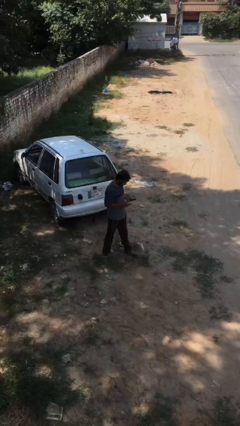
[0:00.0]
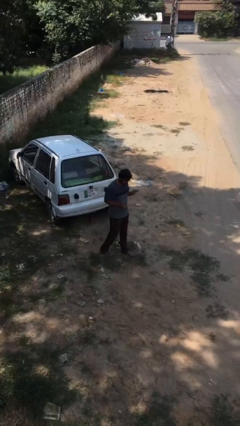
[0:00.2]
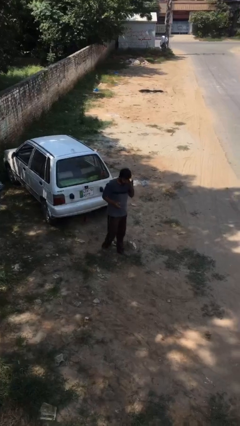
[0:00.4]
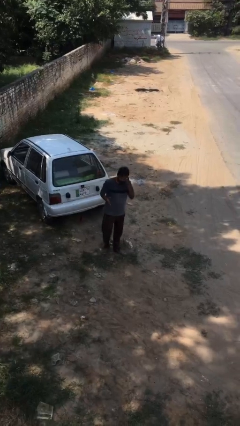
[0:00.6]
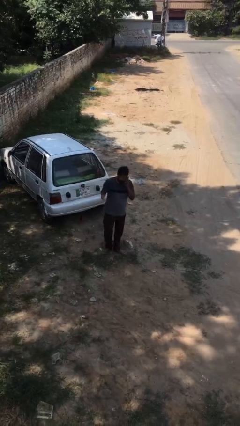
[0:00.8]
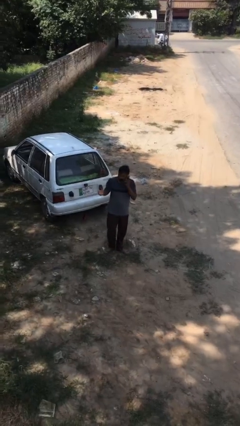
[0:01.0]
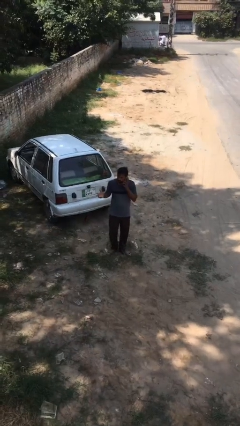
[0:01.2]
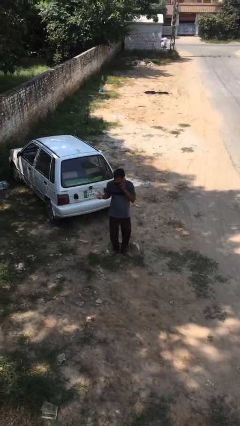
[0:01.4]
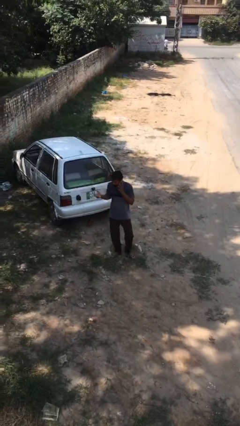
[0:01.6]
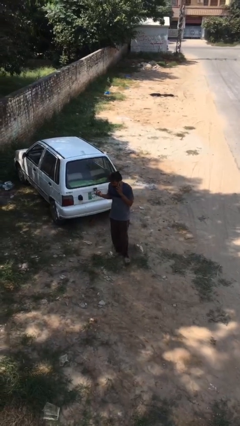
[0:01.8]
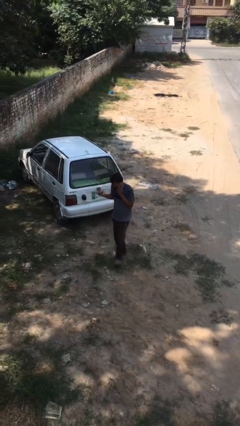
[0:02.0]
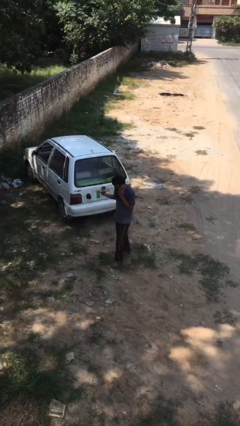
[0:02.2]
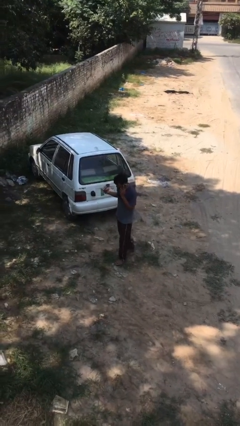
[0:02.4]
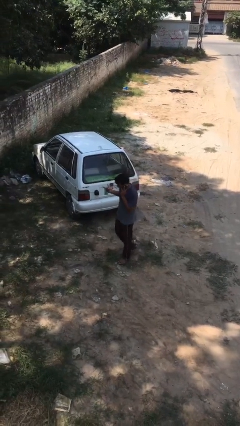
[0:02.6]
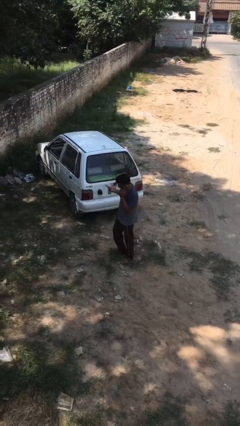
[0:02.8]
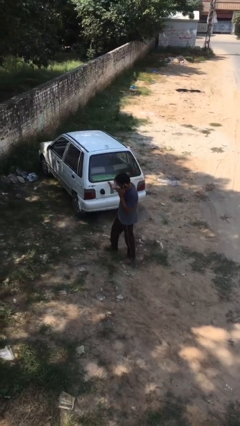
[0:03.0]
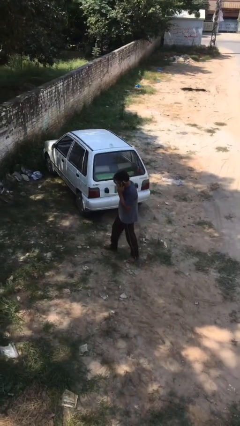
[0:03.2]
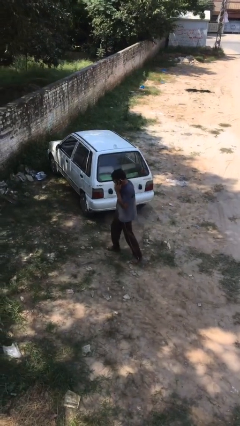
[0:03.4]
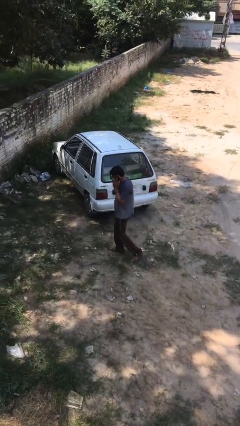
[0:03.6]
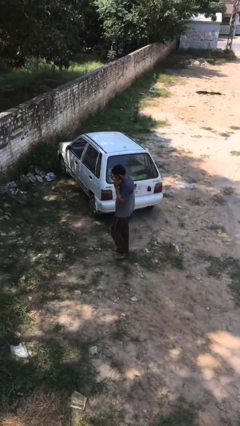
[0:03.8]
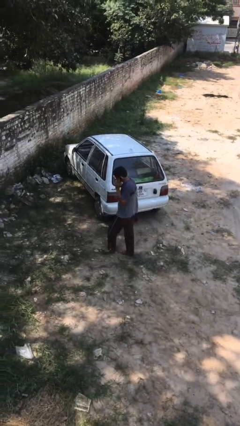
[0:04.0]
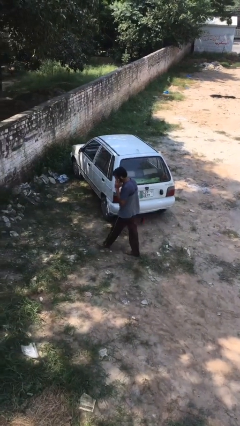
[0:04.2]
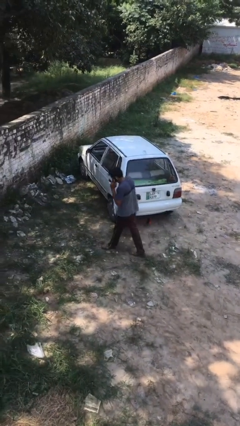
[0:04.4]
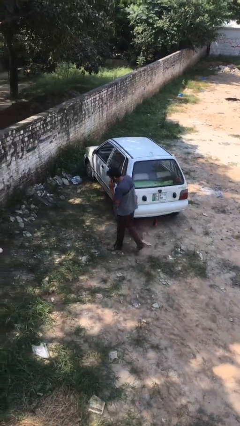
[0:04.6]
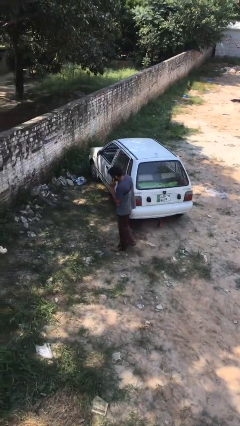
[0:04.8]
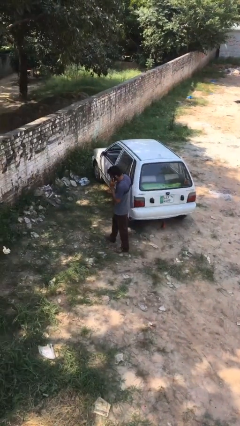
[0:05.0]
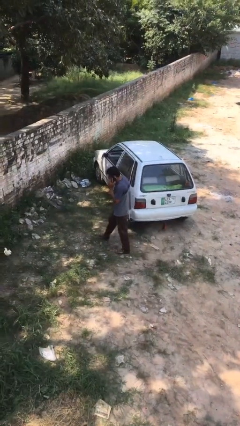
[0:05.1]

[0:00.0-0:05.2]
person talks on phone

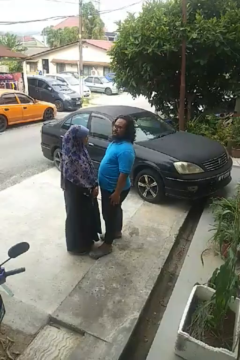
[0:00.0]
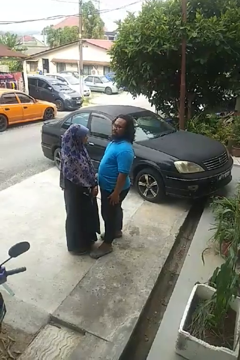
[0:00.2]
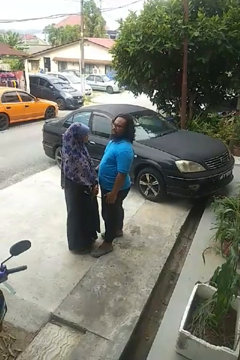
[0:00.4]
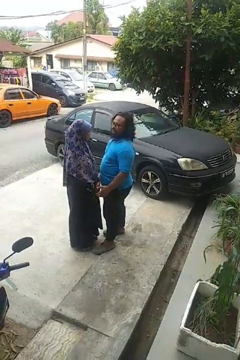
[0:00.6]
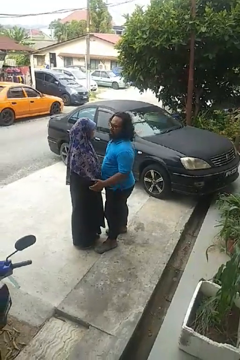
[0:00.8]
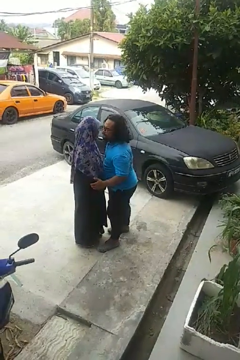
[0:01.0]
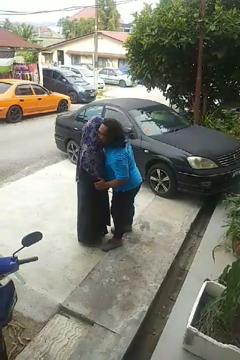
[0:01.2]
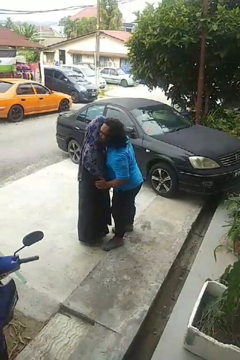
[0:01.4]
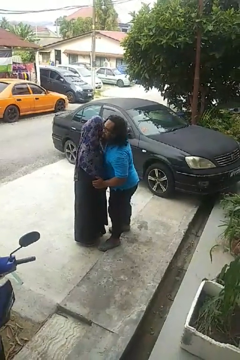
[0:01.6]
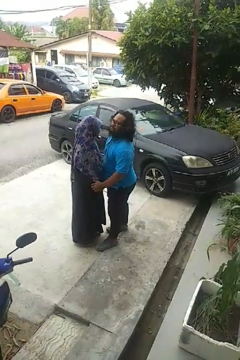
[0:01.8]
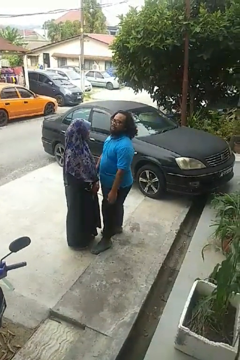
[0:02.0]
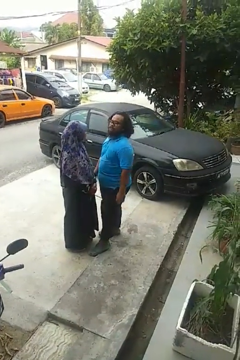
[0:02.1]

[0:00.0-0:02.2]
person kisses cheek of person

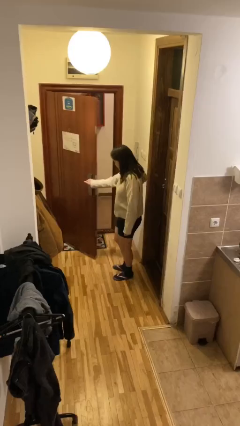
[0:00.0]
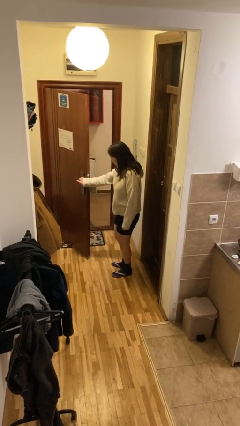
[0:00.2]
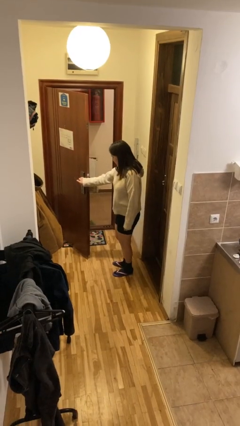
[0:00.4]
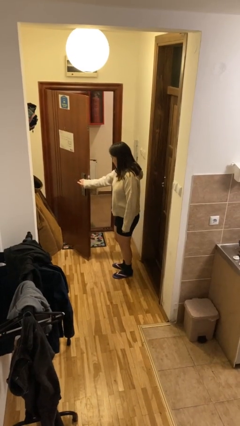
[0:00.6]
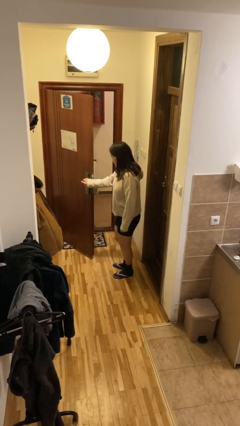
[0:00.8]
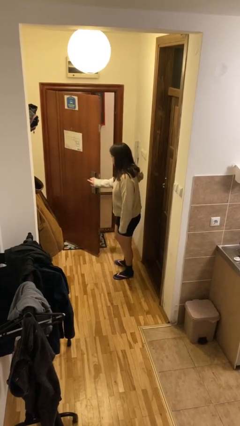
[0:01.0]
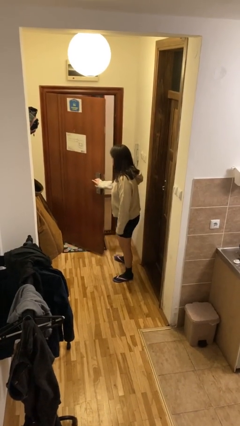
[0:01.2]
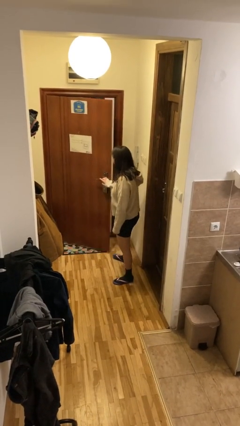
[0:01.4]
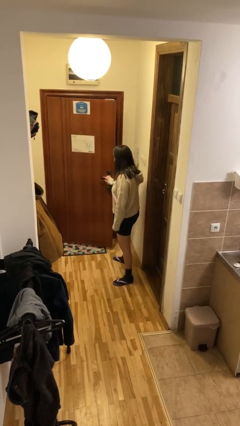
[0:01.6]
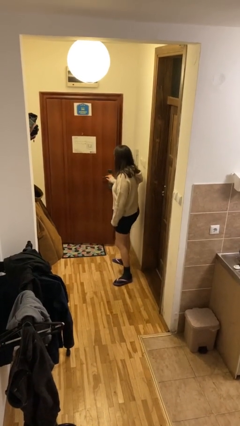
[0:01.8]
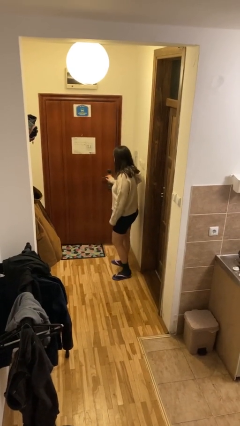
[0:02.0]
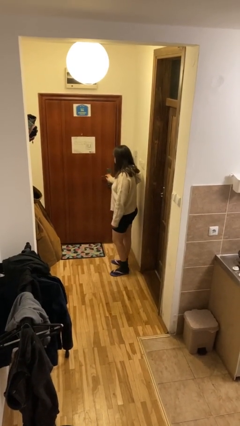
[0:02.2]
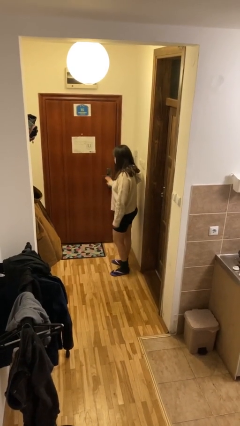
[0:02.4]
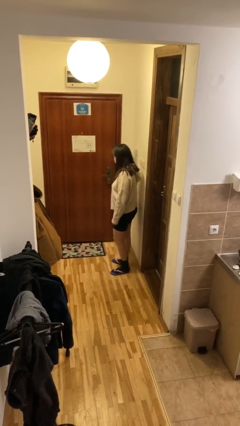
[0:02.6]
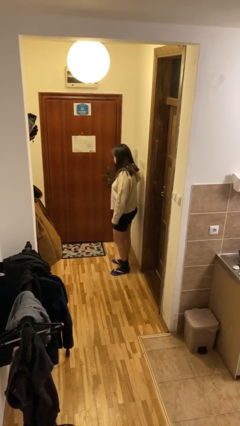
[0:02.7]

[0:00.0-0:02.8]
person opens facility door

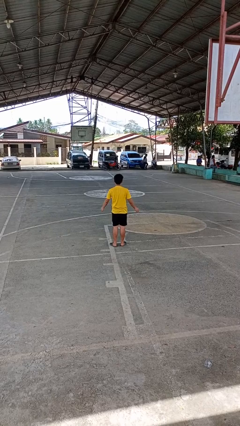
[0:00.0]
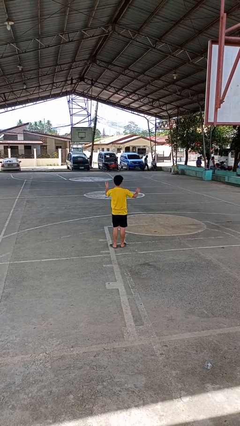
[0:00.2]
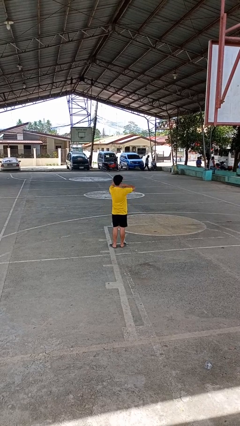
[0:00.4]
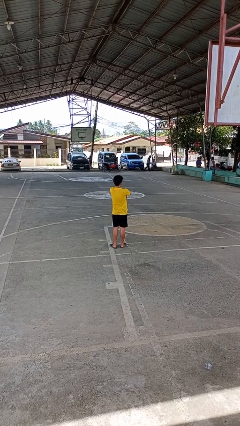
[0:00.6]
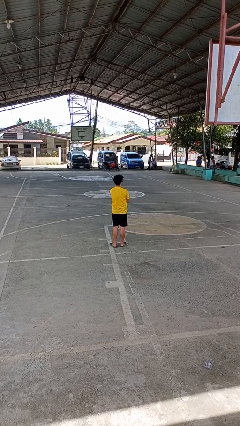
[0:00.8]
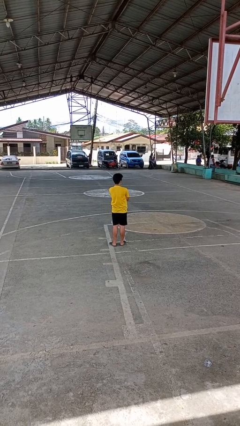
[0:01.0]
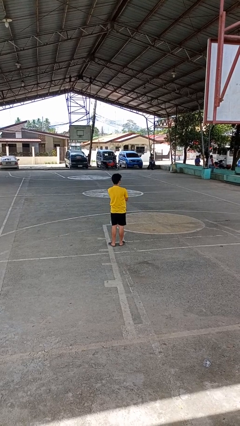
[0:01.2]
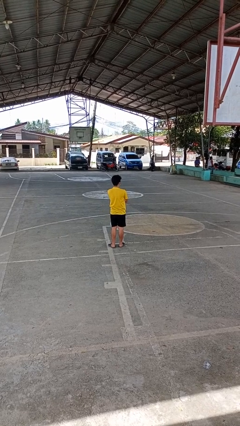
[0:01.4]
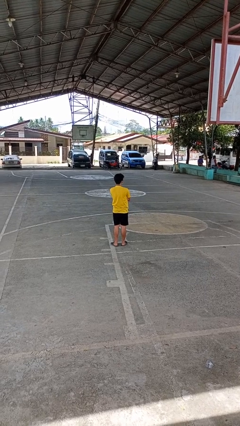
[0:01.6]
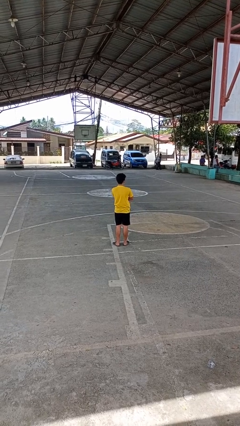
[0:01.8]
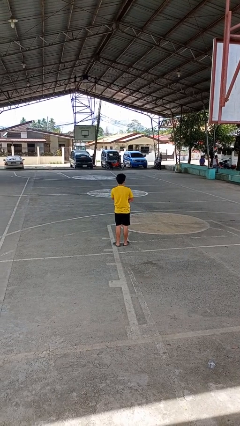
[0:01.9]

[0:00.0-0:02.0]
person crosses arms

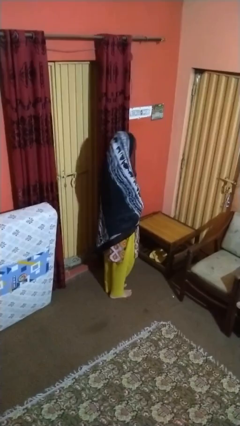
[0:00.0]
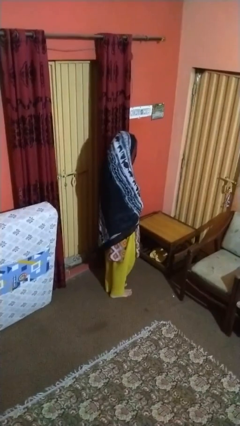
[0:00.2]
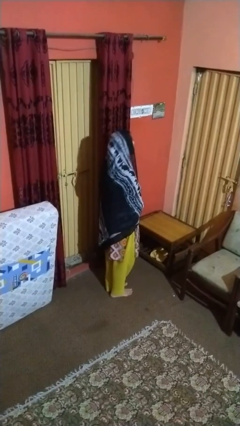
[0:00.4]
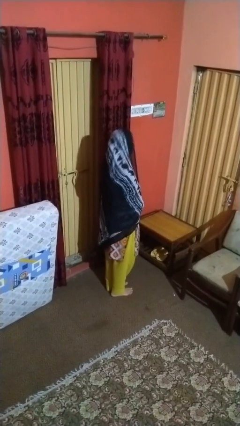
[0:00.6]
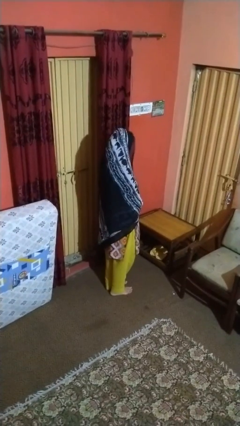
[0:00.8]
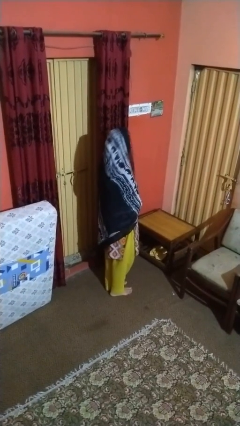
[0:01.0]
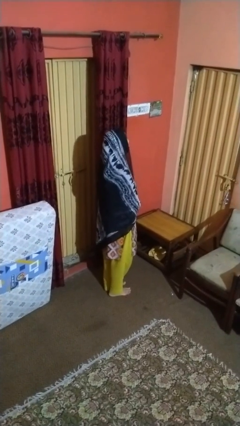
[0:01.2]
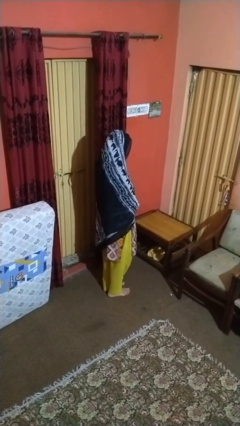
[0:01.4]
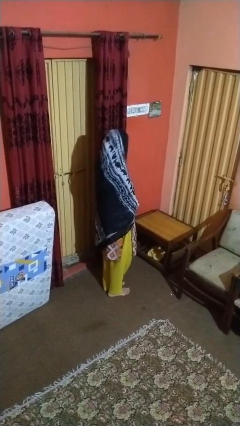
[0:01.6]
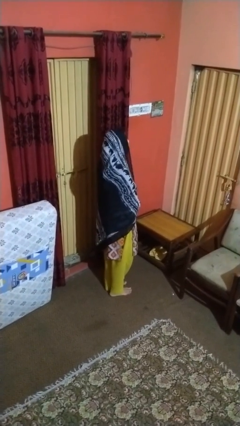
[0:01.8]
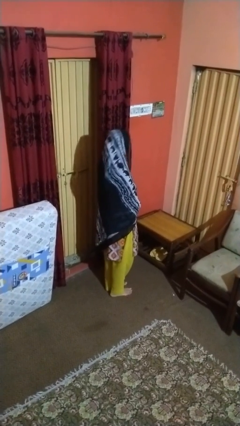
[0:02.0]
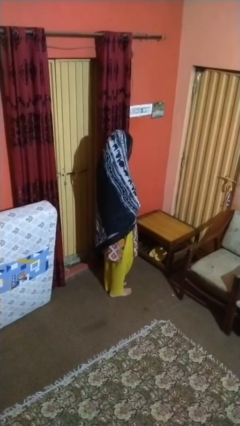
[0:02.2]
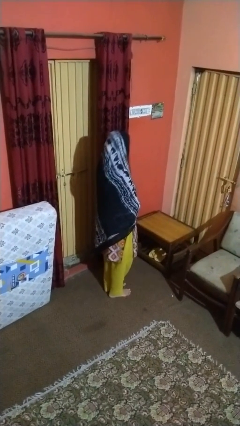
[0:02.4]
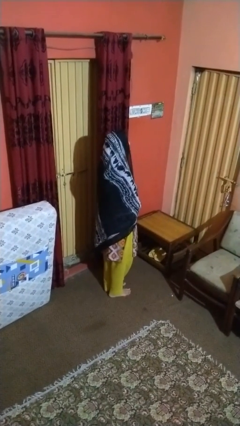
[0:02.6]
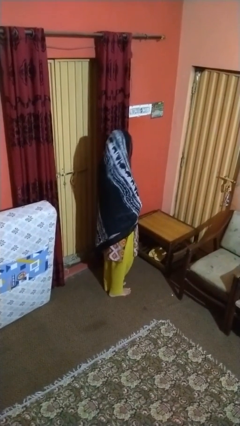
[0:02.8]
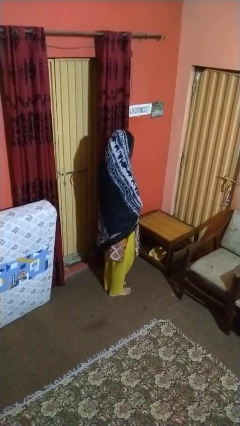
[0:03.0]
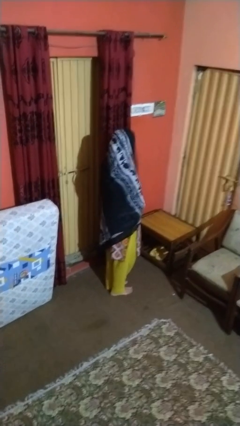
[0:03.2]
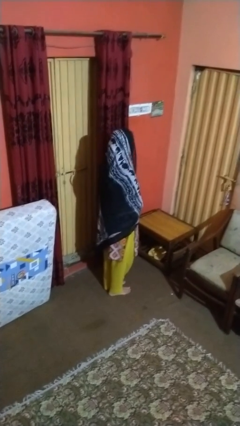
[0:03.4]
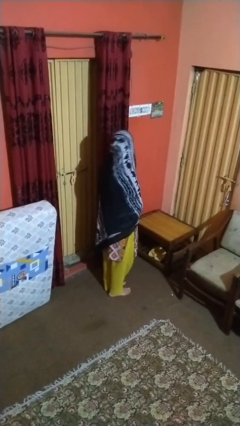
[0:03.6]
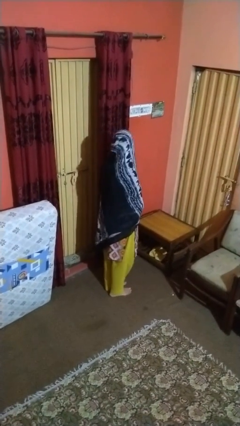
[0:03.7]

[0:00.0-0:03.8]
person nods head

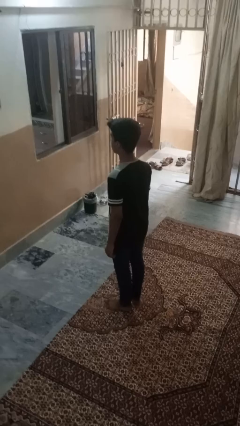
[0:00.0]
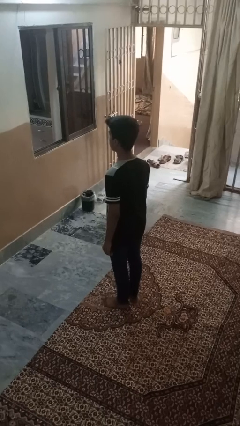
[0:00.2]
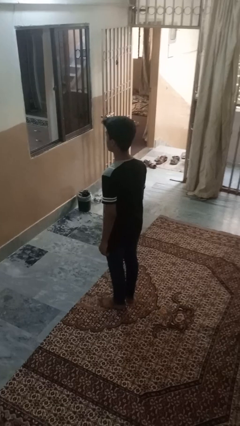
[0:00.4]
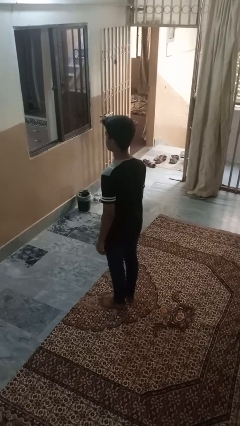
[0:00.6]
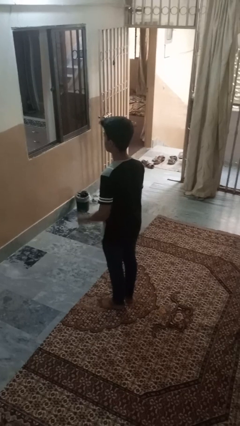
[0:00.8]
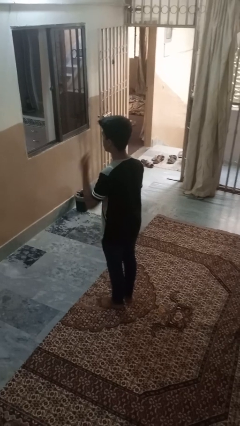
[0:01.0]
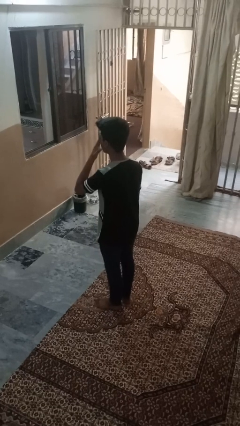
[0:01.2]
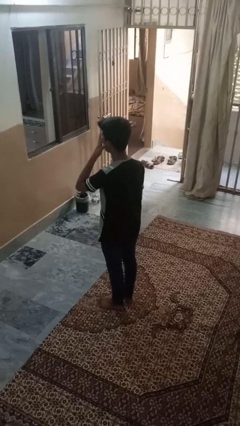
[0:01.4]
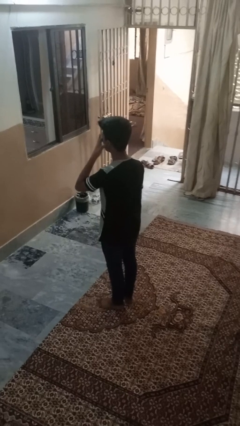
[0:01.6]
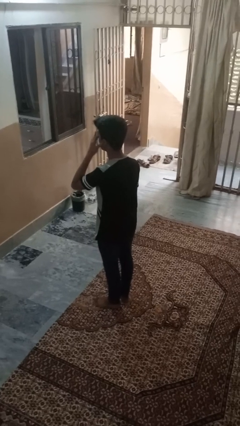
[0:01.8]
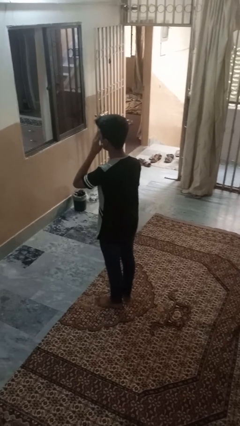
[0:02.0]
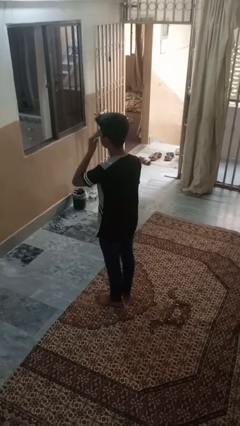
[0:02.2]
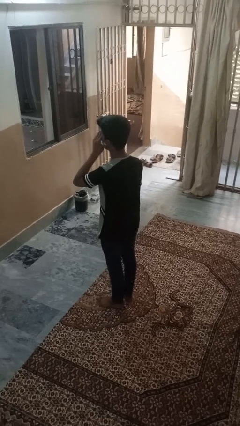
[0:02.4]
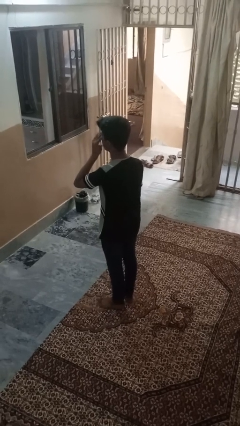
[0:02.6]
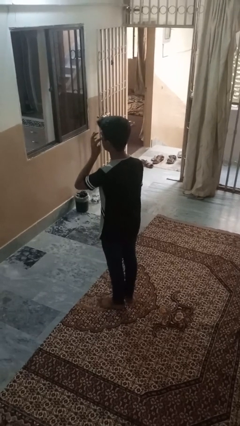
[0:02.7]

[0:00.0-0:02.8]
person rubs eyes
